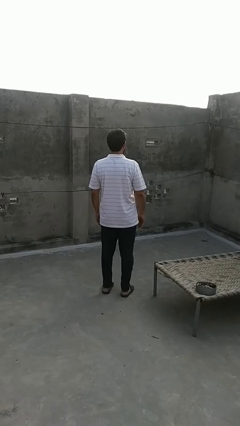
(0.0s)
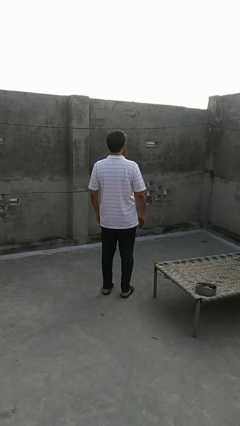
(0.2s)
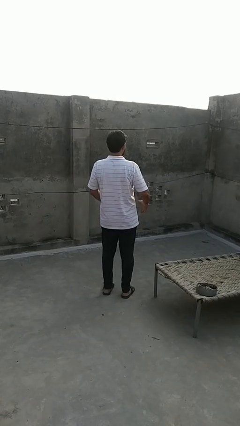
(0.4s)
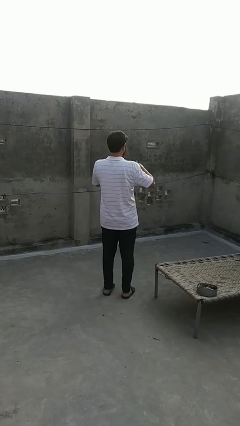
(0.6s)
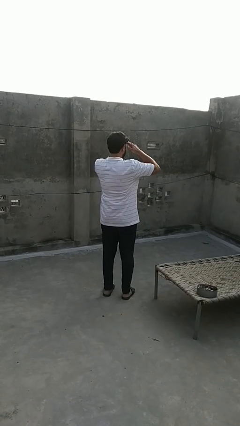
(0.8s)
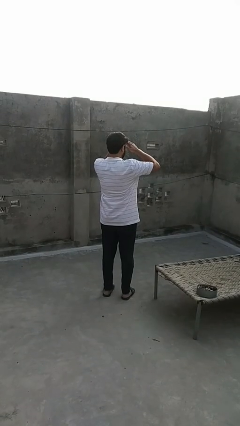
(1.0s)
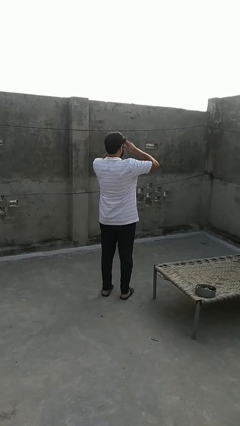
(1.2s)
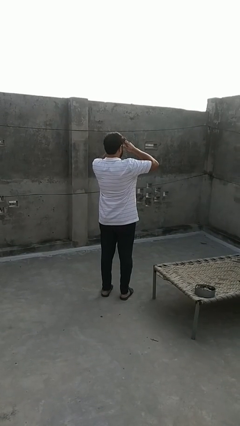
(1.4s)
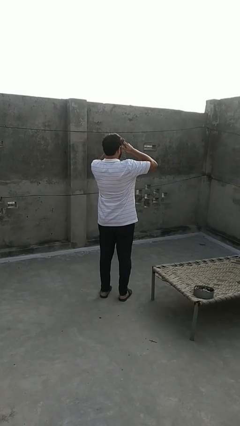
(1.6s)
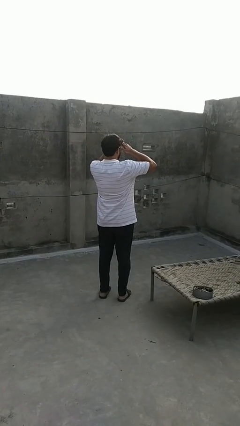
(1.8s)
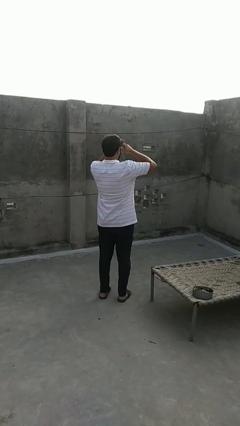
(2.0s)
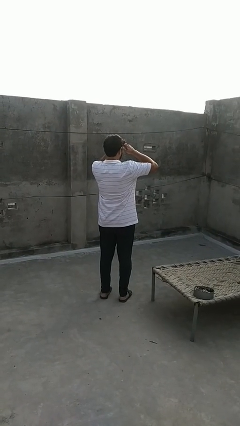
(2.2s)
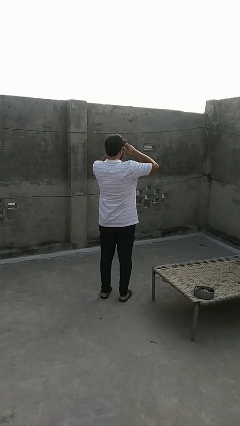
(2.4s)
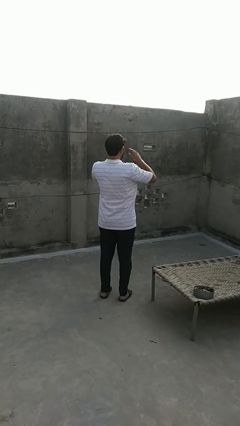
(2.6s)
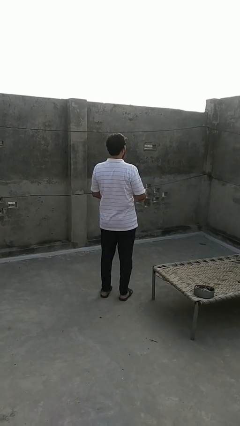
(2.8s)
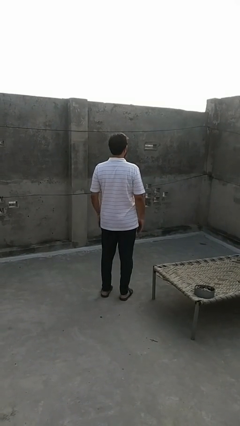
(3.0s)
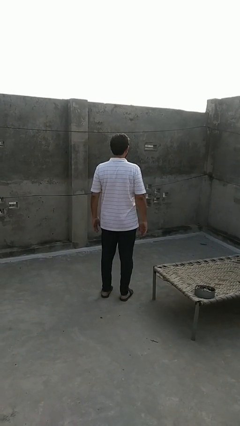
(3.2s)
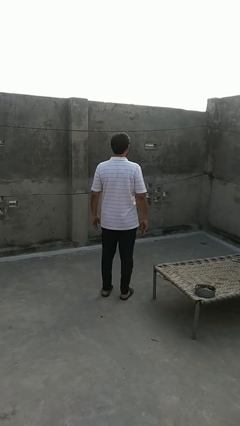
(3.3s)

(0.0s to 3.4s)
person shades eyes

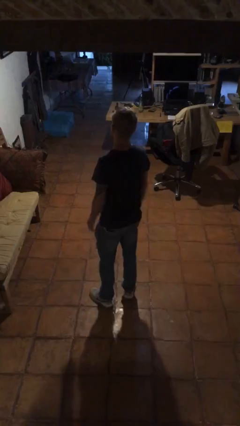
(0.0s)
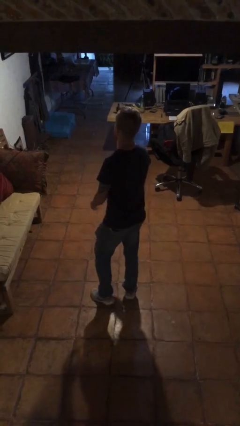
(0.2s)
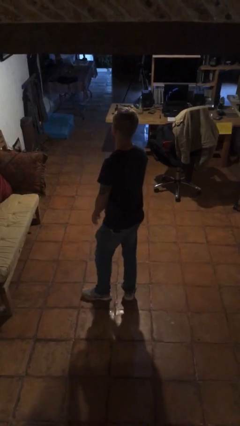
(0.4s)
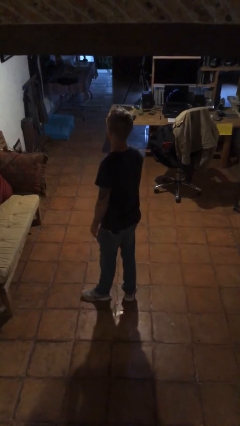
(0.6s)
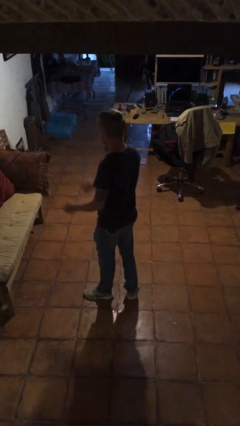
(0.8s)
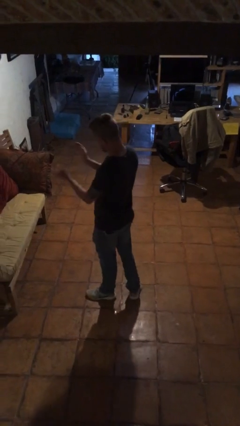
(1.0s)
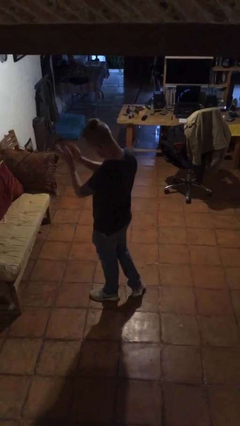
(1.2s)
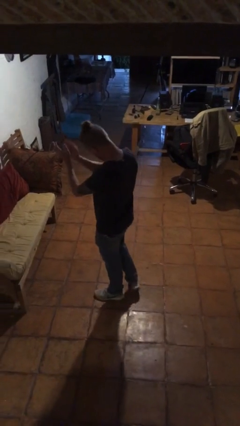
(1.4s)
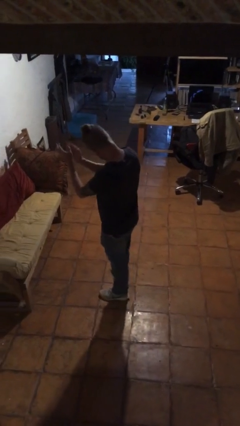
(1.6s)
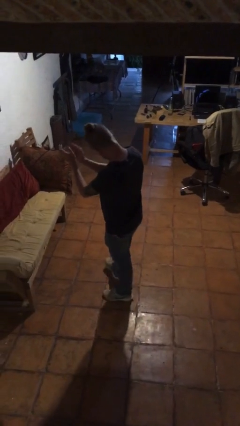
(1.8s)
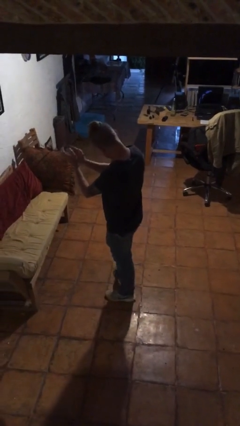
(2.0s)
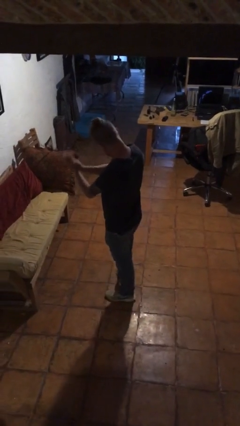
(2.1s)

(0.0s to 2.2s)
person claps hands

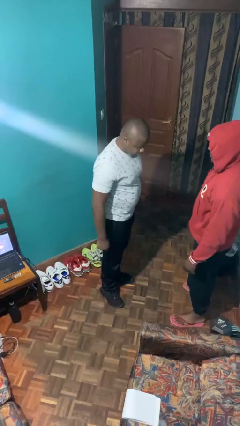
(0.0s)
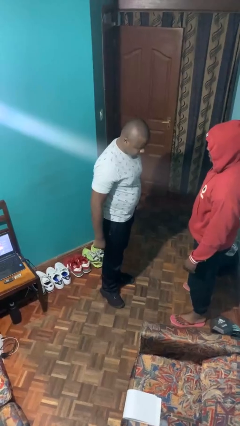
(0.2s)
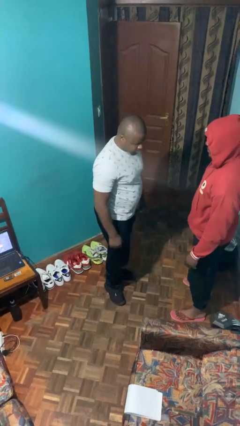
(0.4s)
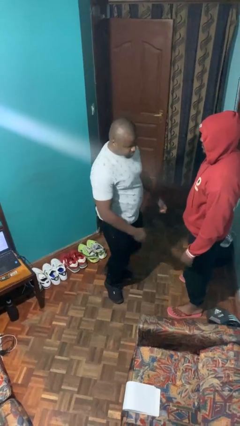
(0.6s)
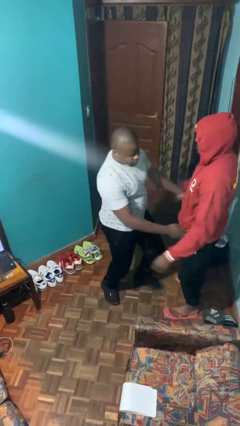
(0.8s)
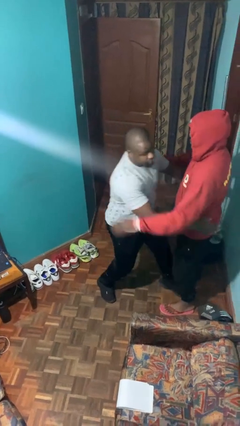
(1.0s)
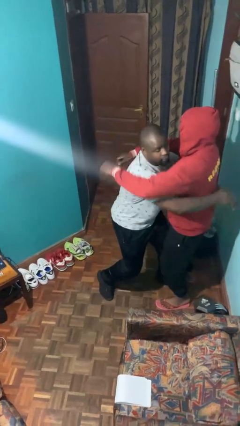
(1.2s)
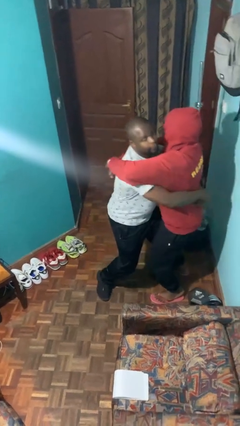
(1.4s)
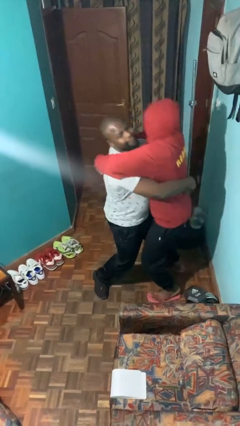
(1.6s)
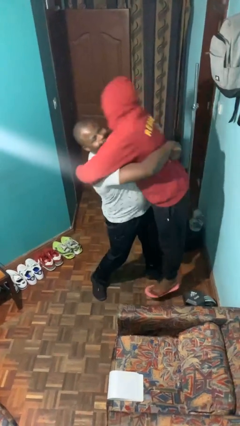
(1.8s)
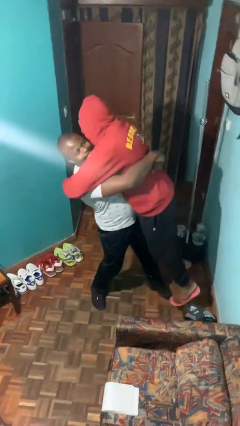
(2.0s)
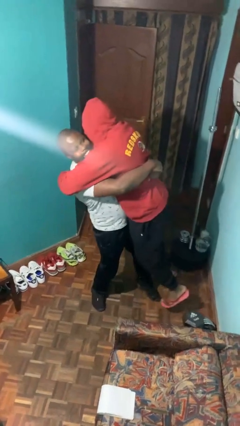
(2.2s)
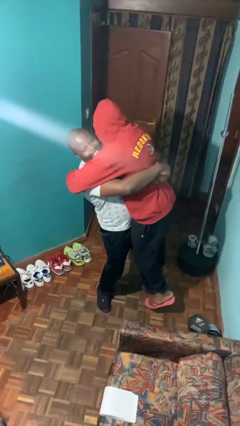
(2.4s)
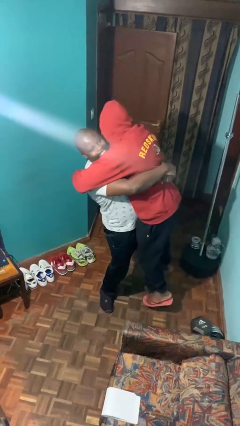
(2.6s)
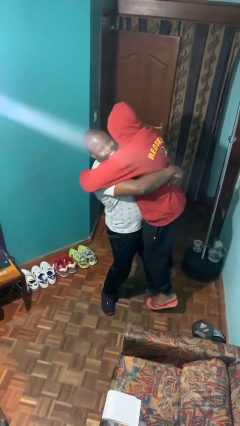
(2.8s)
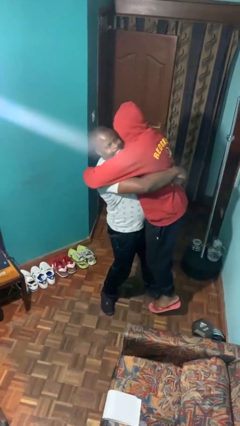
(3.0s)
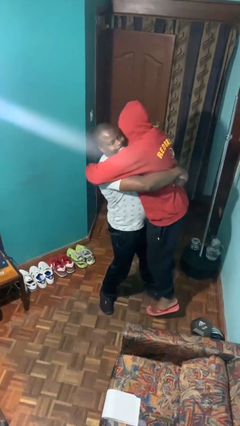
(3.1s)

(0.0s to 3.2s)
person picks up person

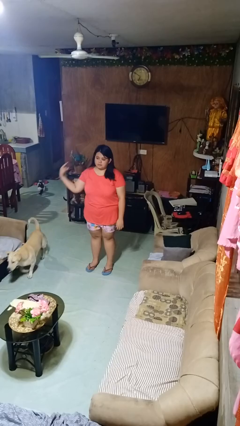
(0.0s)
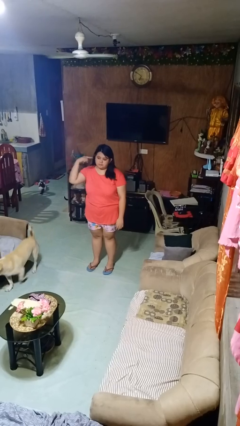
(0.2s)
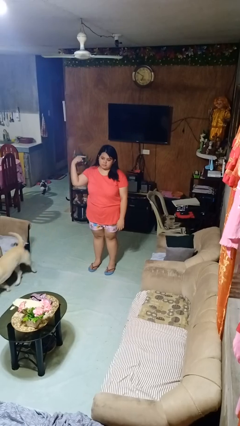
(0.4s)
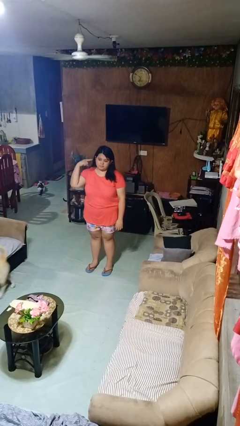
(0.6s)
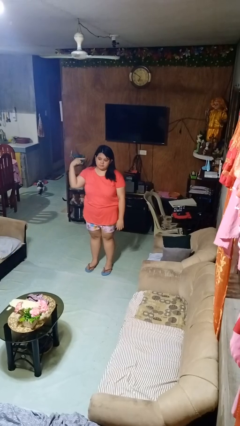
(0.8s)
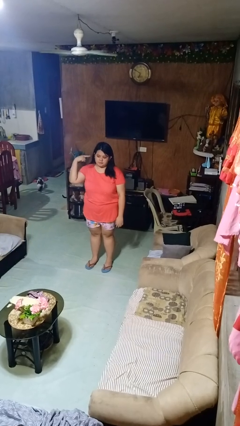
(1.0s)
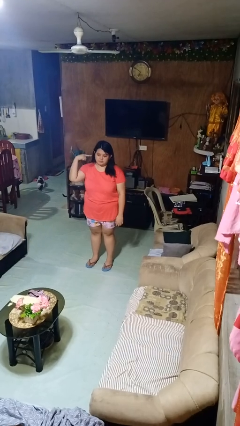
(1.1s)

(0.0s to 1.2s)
person gestures listen closely

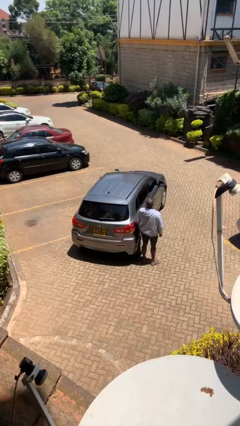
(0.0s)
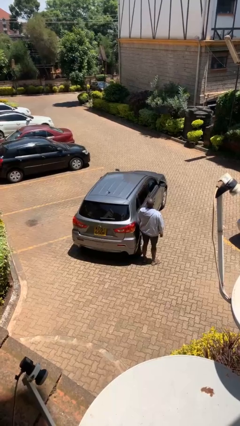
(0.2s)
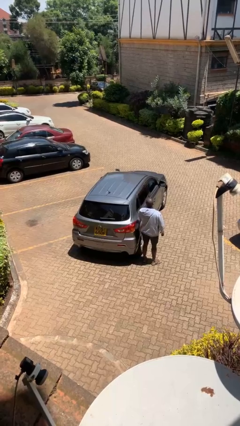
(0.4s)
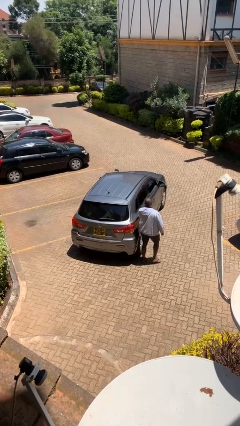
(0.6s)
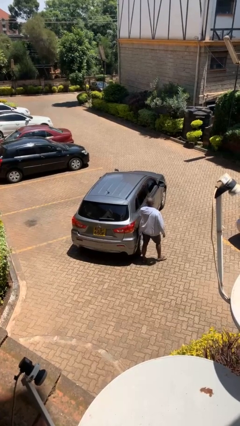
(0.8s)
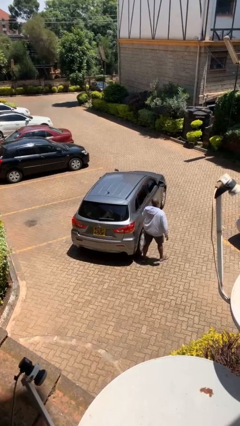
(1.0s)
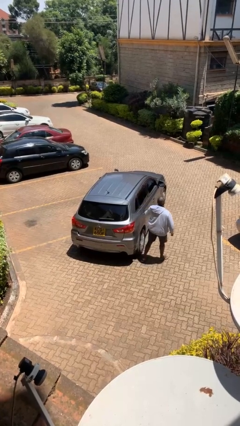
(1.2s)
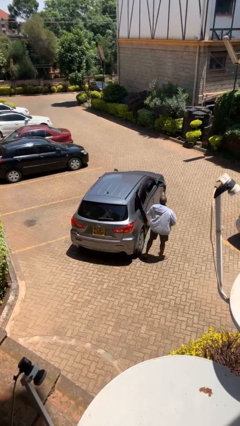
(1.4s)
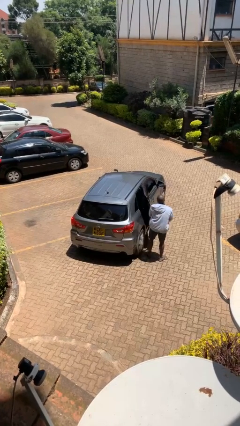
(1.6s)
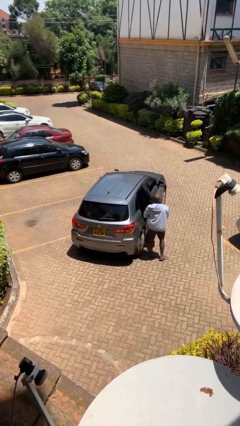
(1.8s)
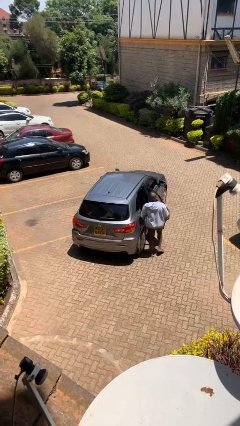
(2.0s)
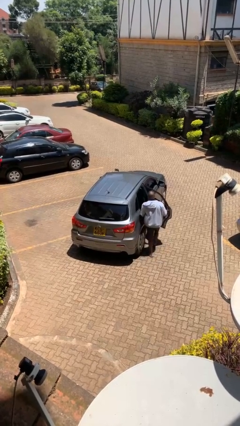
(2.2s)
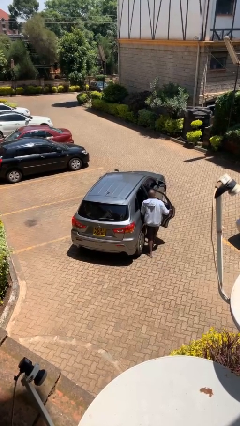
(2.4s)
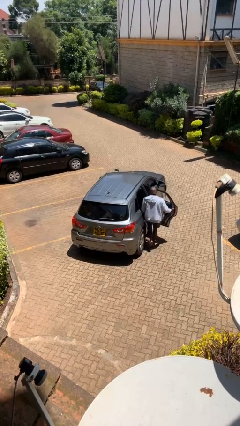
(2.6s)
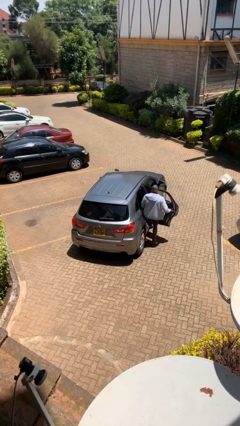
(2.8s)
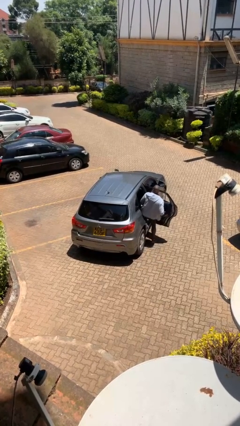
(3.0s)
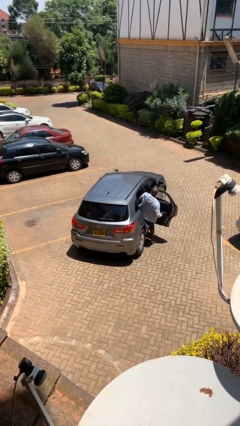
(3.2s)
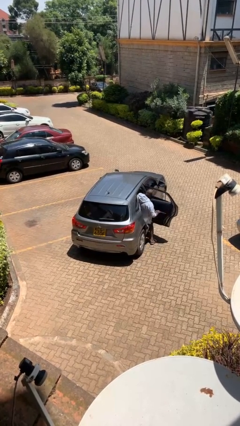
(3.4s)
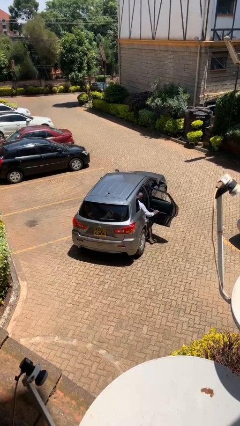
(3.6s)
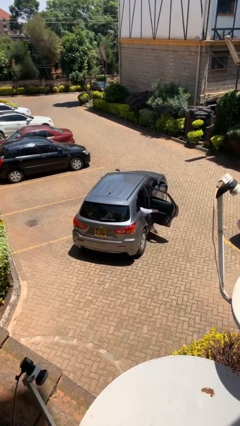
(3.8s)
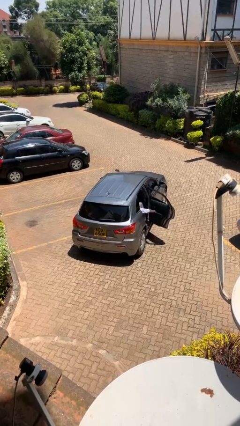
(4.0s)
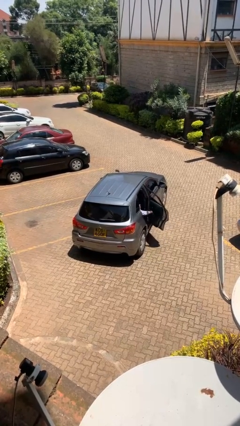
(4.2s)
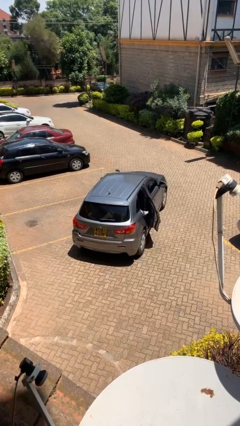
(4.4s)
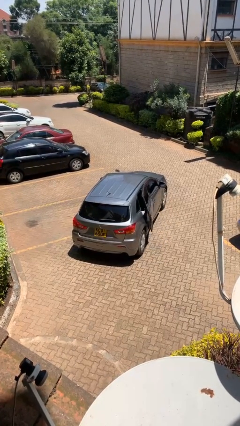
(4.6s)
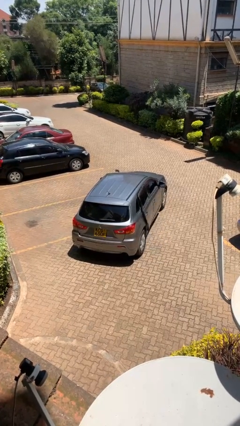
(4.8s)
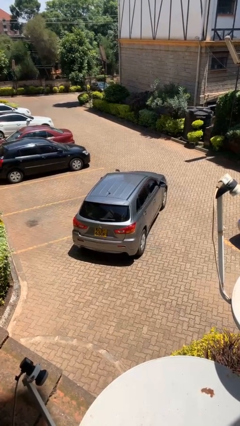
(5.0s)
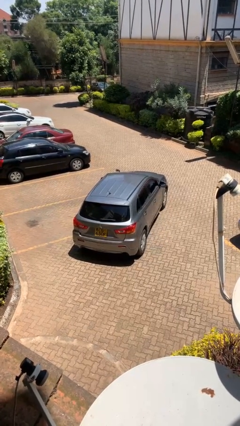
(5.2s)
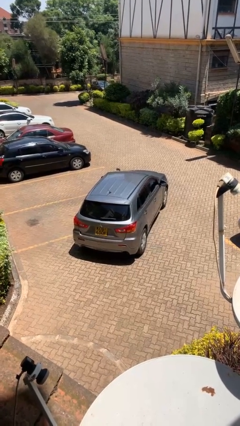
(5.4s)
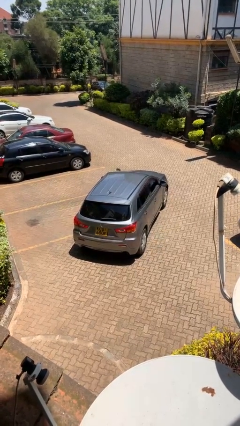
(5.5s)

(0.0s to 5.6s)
car picks up person

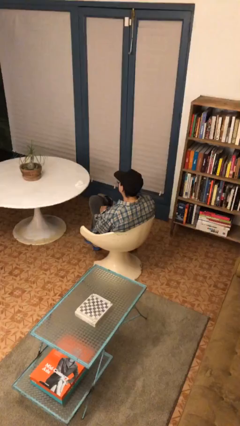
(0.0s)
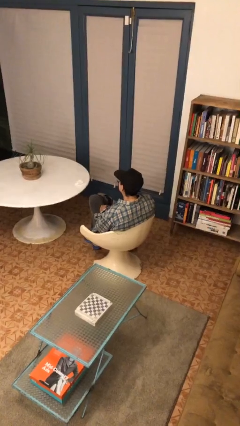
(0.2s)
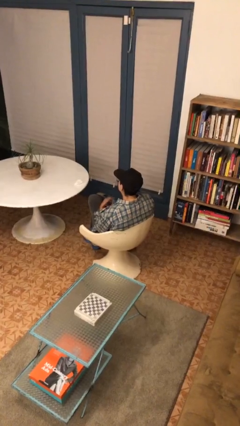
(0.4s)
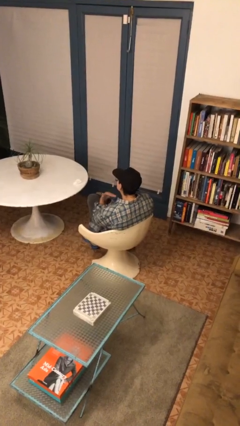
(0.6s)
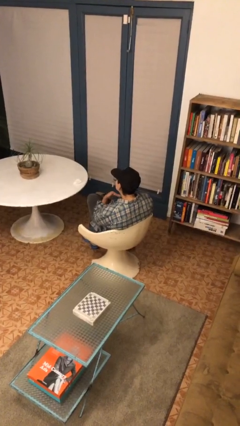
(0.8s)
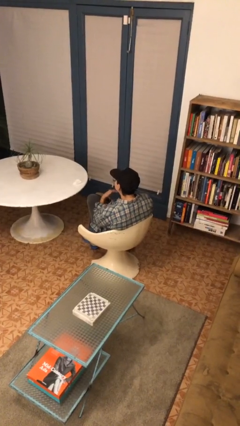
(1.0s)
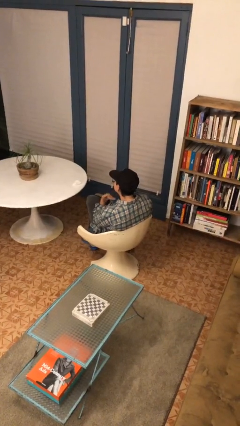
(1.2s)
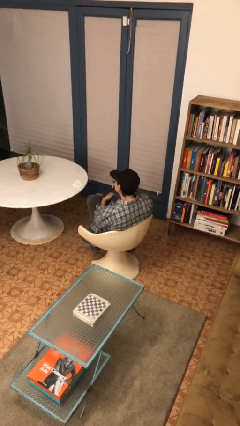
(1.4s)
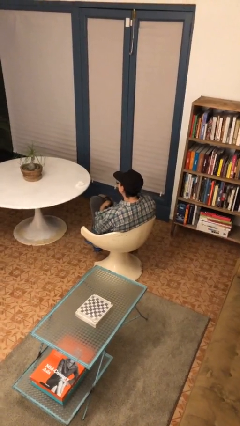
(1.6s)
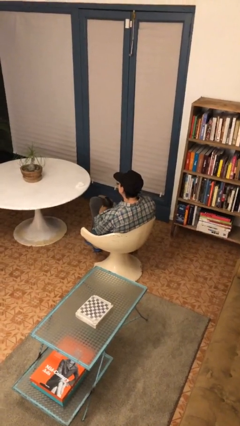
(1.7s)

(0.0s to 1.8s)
person gestures cut

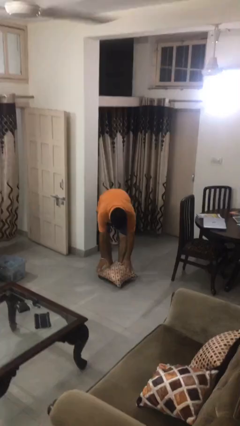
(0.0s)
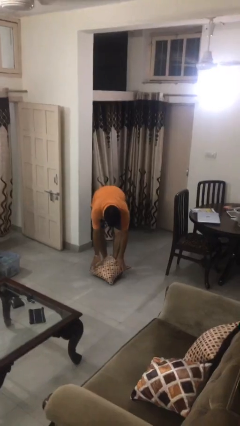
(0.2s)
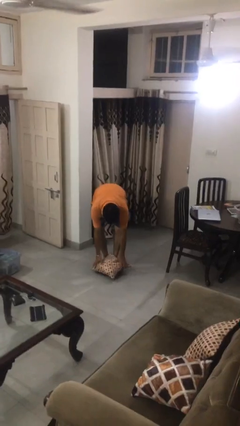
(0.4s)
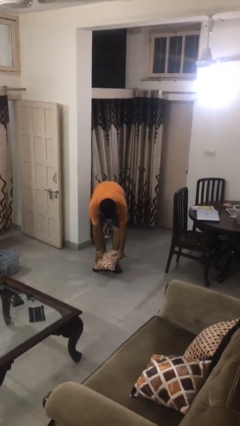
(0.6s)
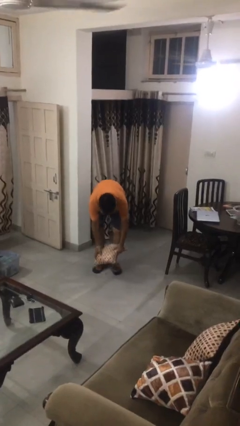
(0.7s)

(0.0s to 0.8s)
person drops object
